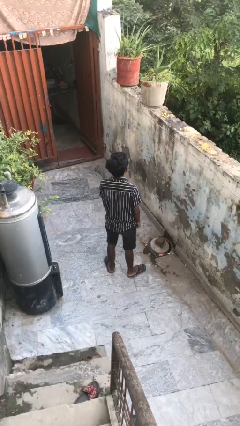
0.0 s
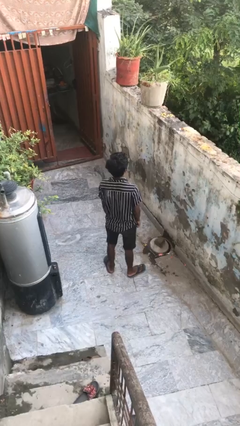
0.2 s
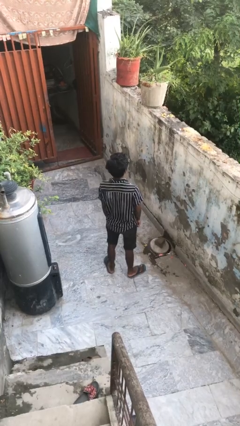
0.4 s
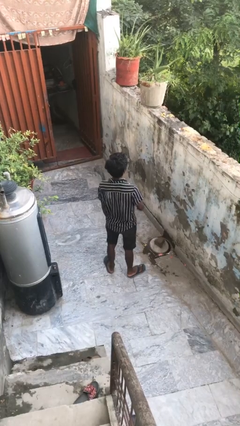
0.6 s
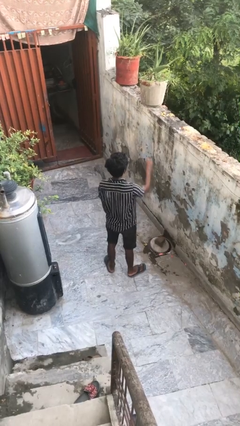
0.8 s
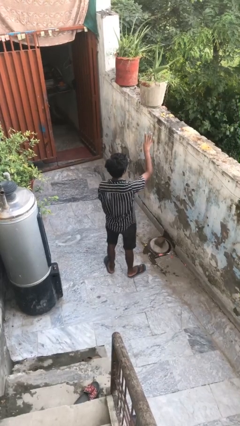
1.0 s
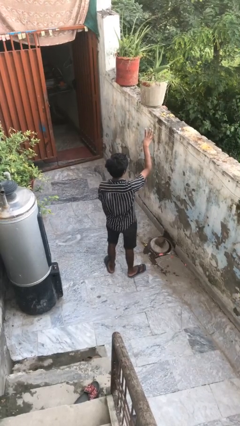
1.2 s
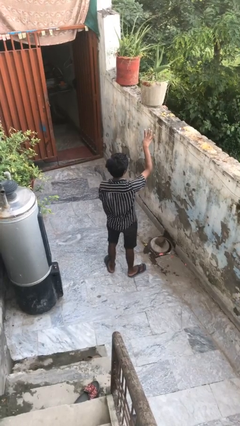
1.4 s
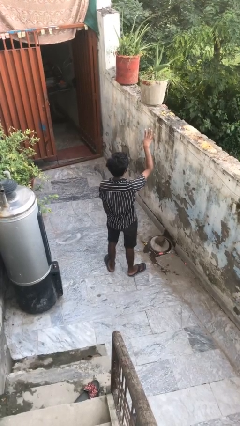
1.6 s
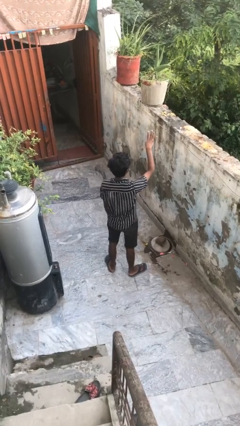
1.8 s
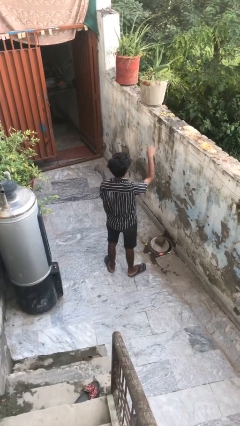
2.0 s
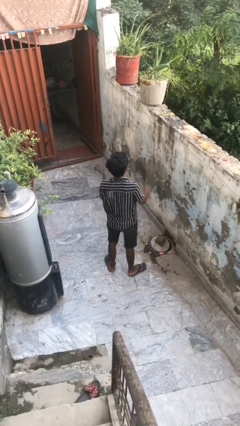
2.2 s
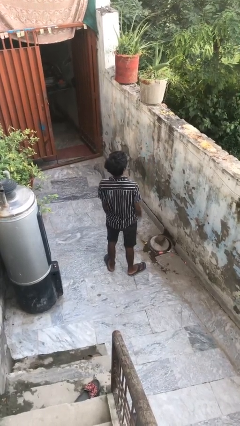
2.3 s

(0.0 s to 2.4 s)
person gestures number four

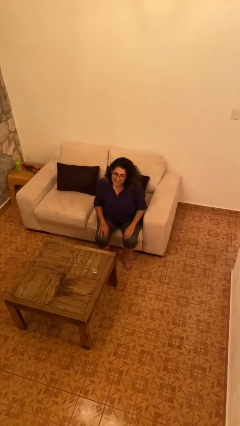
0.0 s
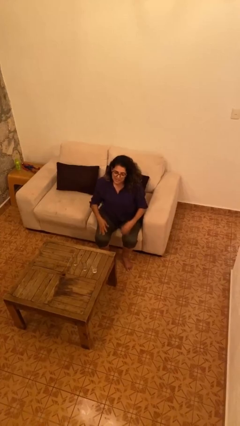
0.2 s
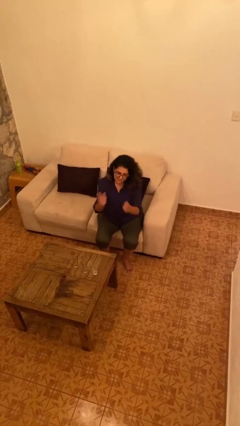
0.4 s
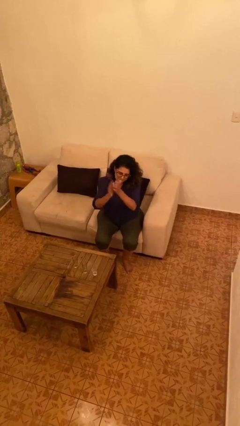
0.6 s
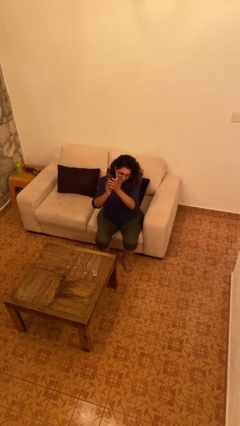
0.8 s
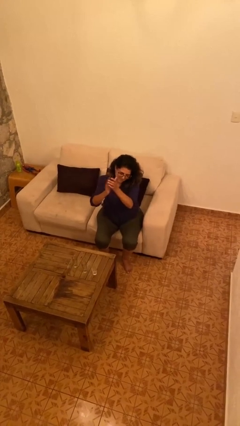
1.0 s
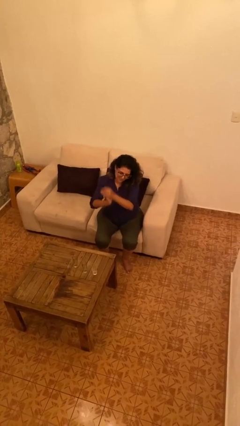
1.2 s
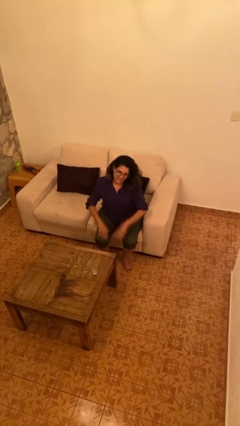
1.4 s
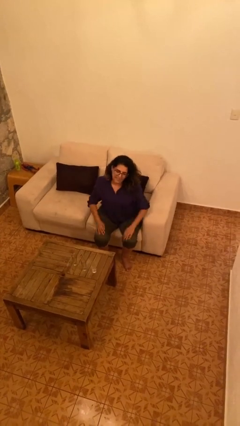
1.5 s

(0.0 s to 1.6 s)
person claps hands

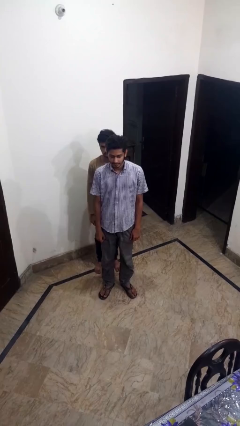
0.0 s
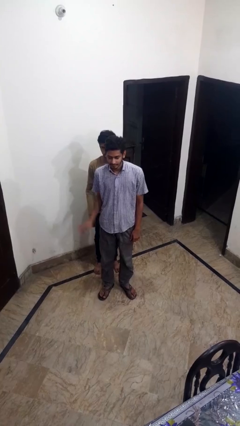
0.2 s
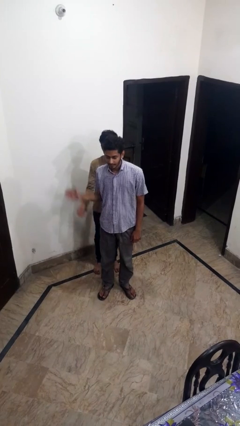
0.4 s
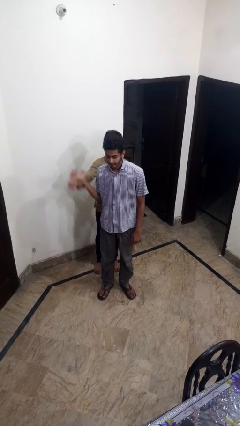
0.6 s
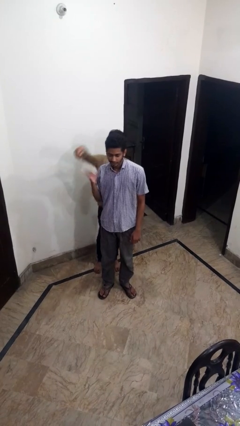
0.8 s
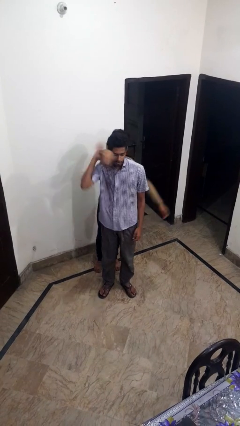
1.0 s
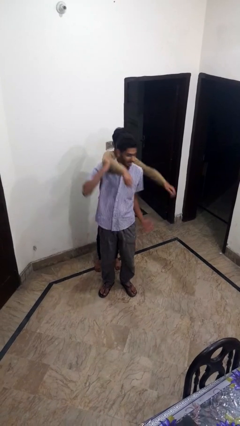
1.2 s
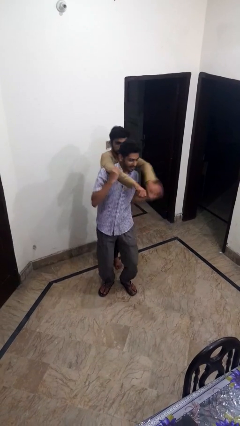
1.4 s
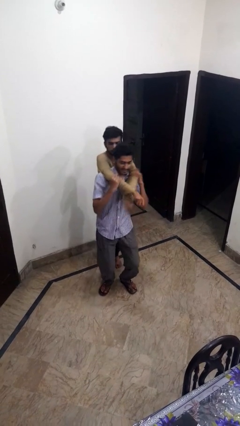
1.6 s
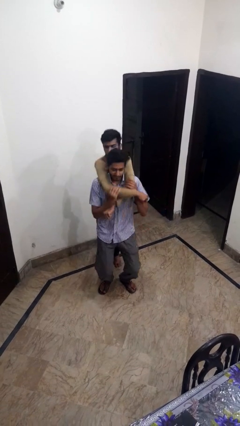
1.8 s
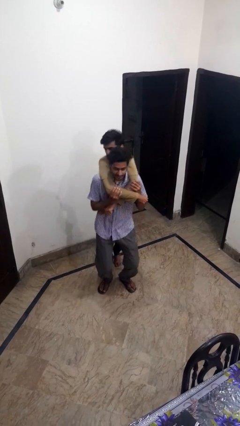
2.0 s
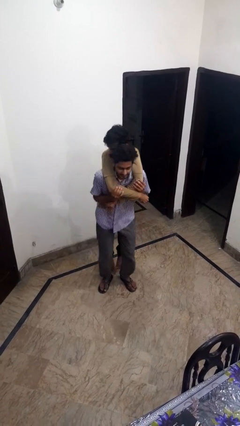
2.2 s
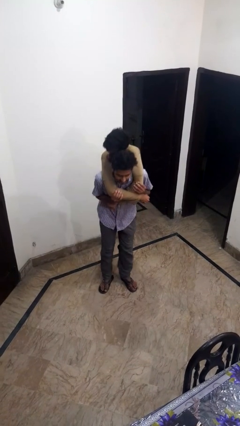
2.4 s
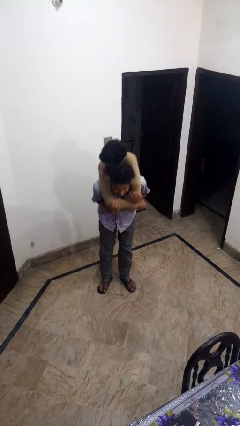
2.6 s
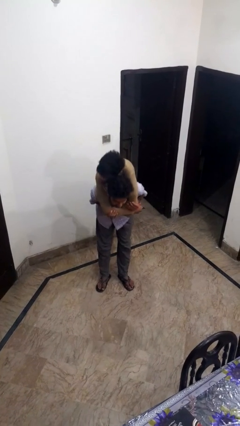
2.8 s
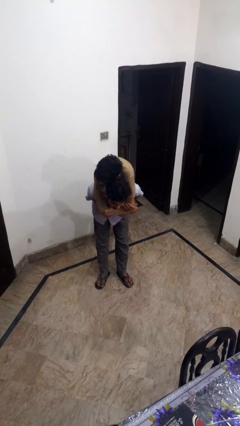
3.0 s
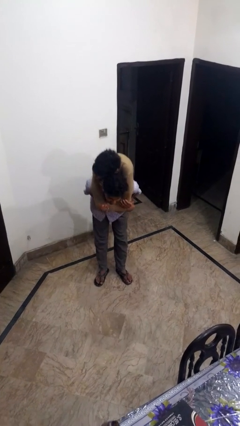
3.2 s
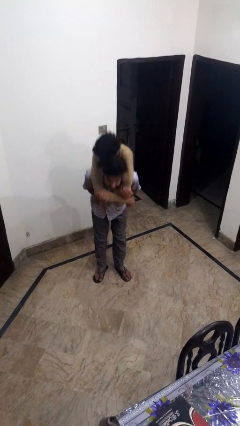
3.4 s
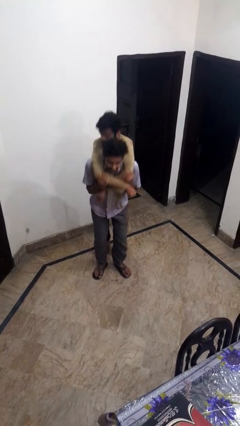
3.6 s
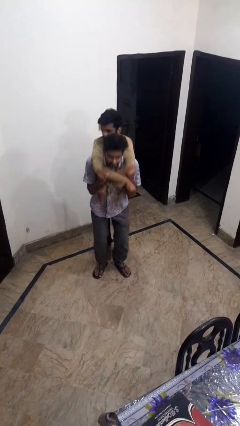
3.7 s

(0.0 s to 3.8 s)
person carries person over shoulder

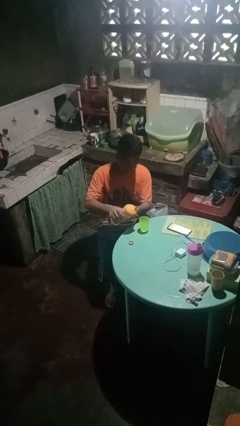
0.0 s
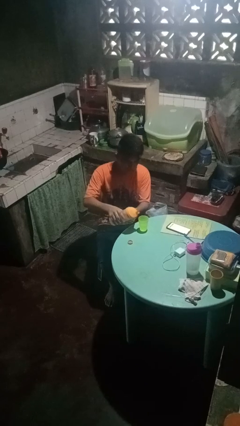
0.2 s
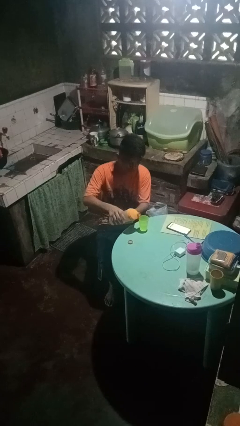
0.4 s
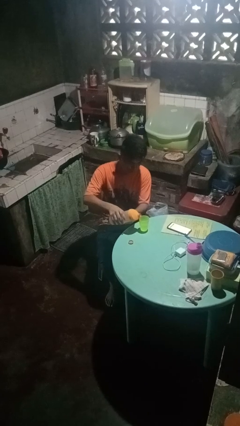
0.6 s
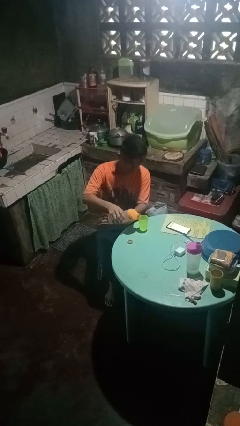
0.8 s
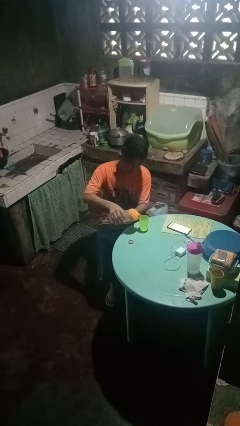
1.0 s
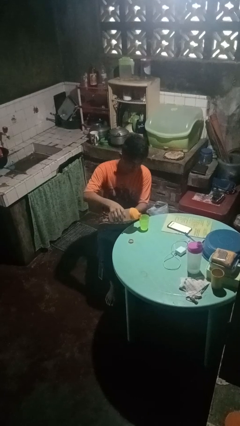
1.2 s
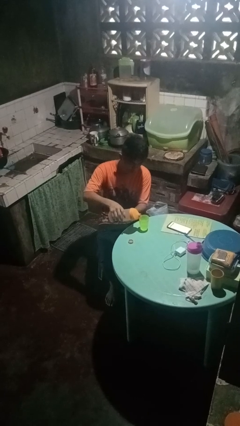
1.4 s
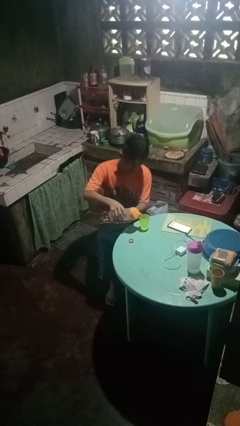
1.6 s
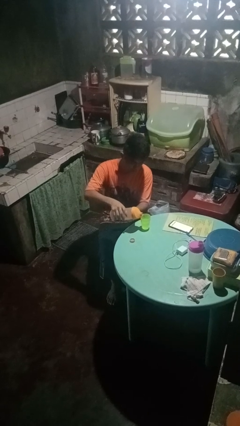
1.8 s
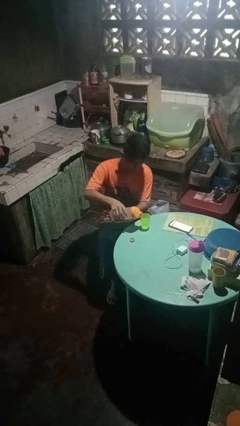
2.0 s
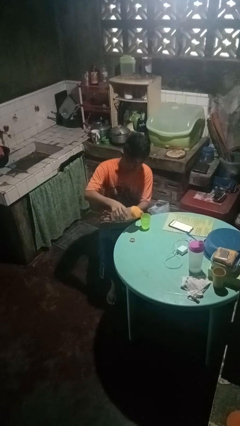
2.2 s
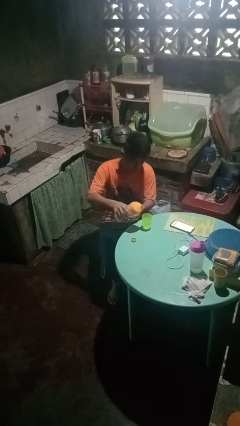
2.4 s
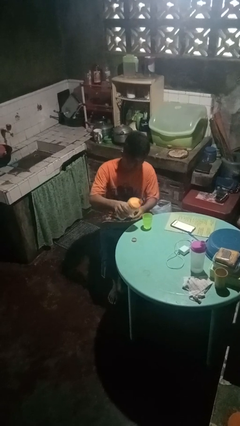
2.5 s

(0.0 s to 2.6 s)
person pours liquid into cup

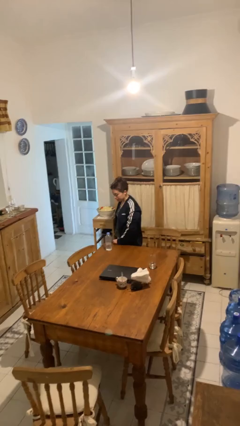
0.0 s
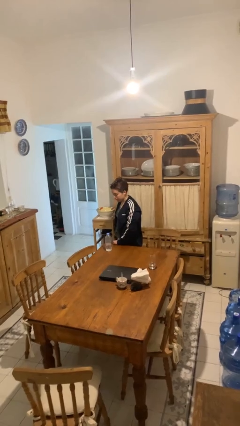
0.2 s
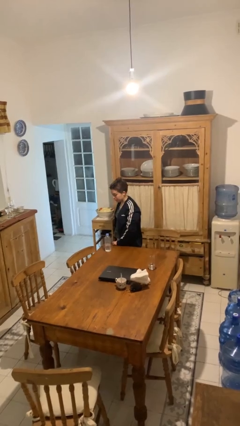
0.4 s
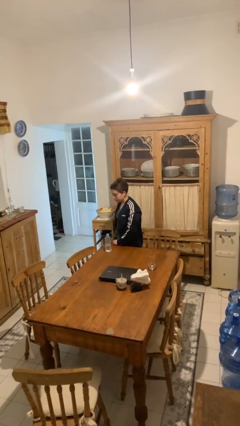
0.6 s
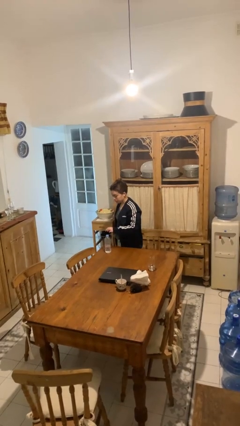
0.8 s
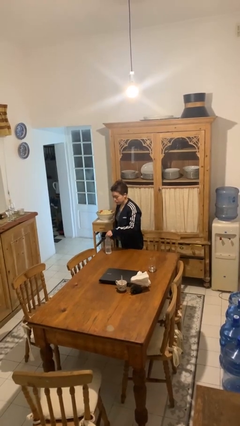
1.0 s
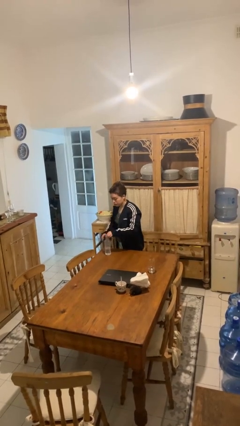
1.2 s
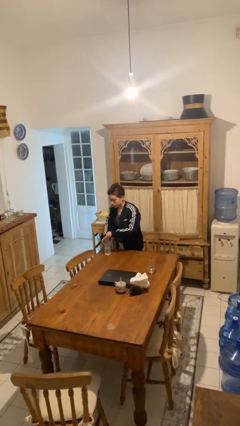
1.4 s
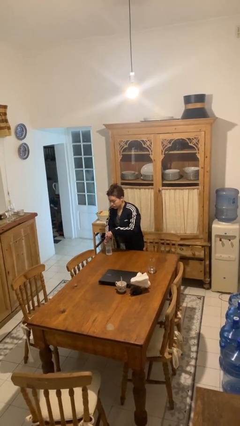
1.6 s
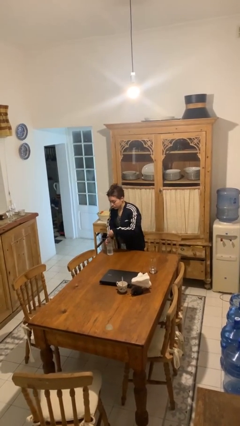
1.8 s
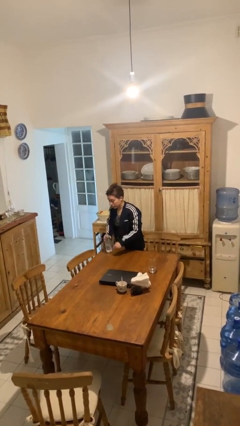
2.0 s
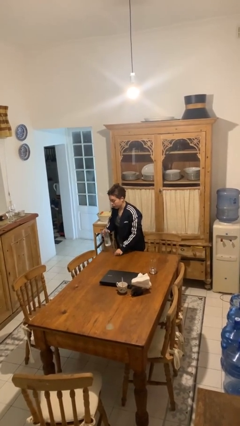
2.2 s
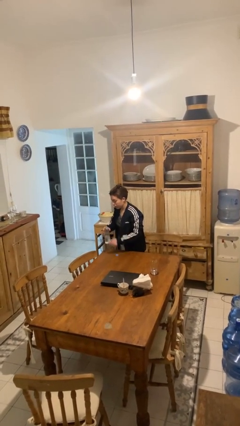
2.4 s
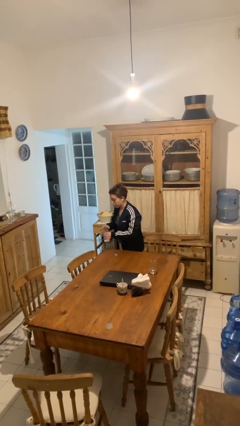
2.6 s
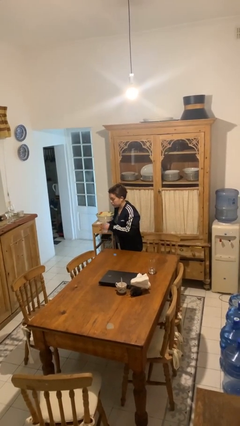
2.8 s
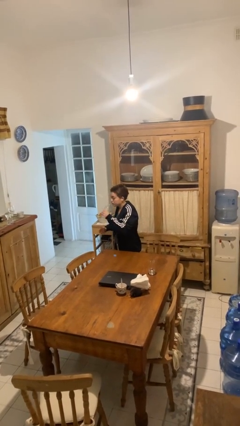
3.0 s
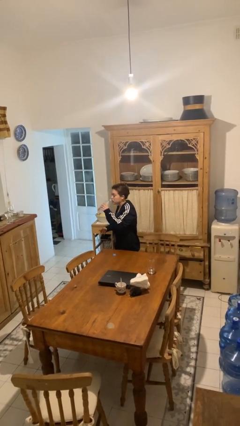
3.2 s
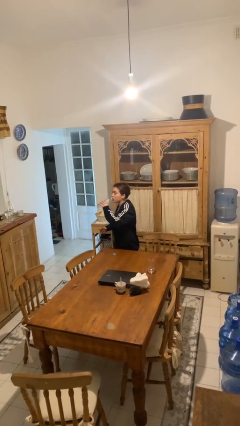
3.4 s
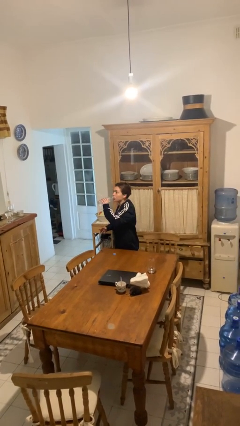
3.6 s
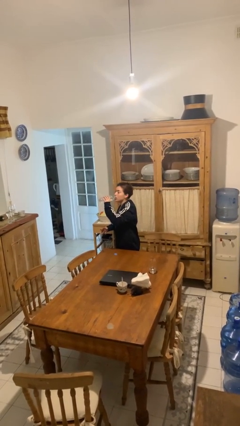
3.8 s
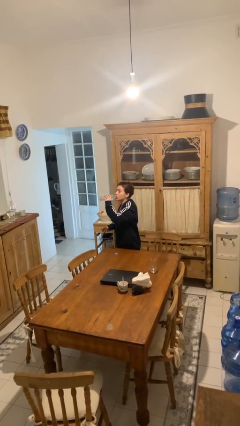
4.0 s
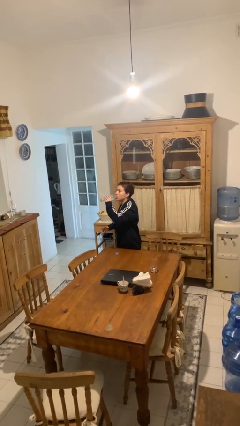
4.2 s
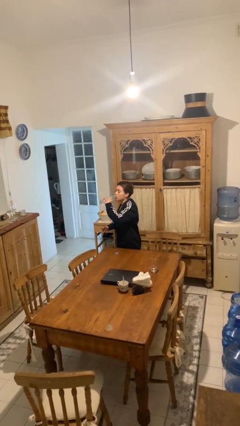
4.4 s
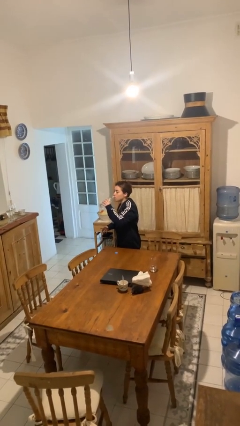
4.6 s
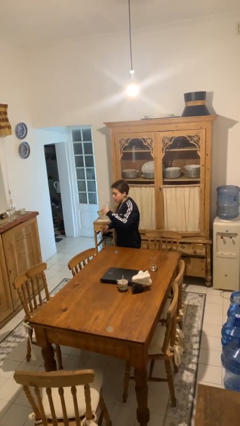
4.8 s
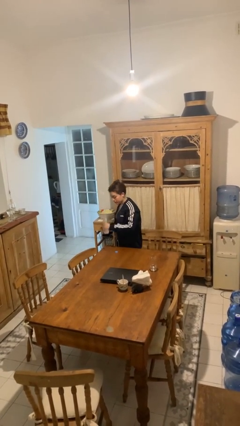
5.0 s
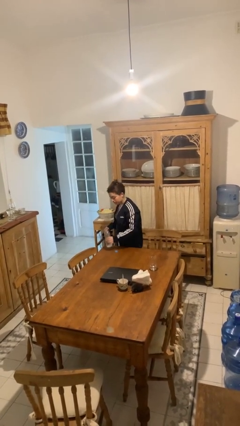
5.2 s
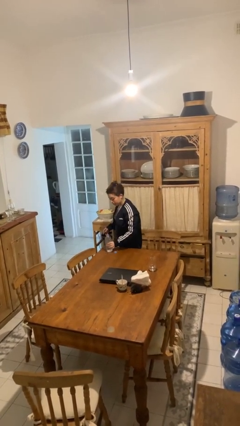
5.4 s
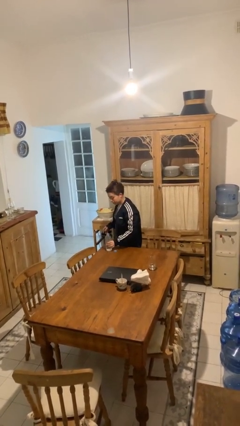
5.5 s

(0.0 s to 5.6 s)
person drinks from bottle

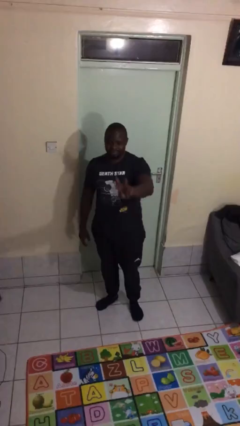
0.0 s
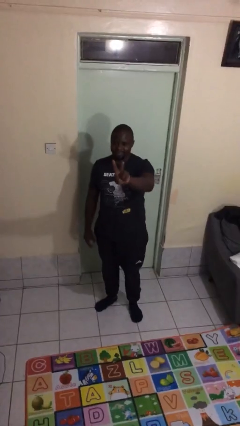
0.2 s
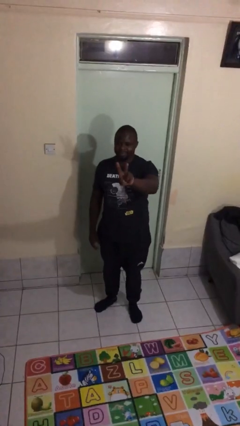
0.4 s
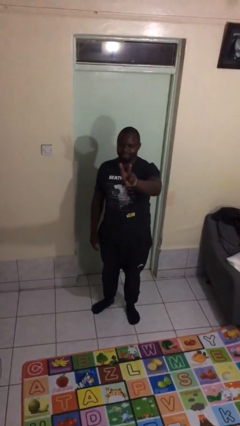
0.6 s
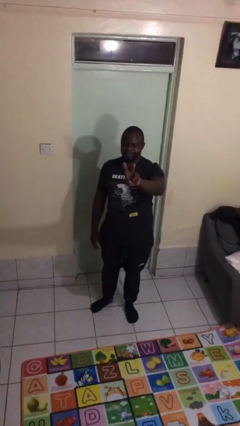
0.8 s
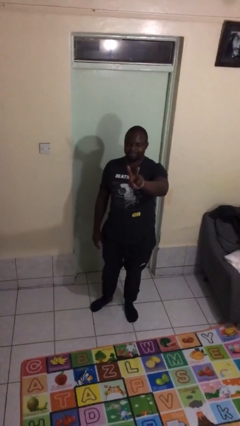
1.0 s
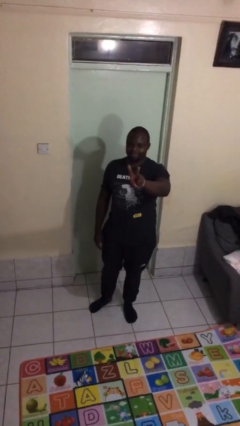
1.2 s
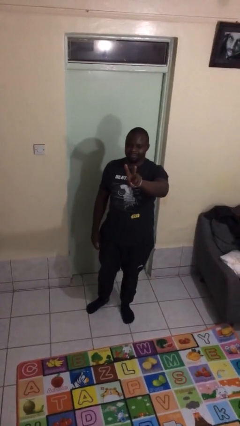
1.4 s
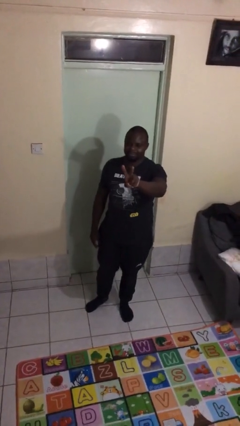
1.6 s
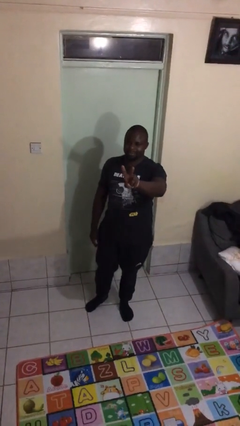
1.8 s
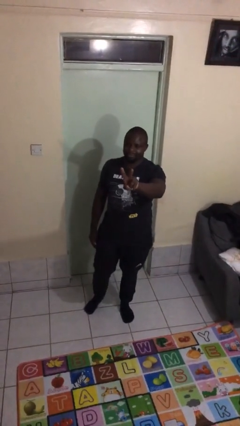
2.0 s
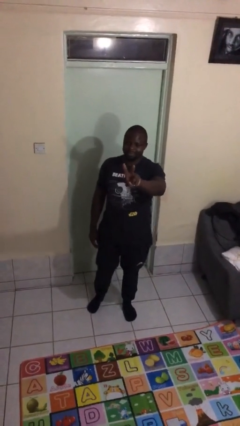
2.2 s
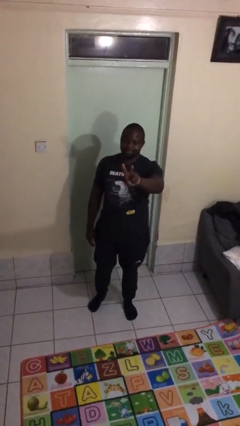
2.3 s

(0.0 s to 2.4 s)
person gestures peace
